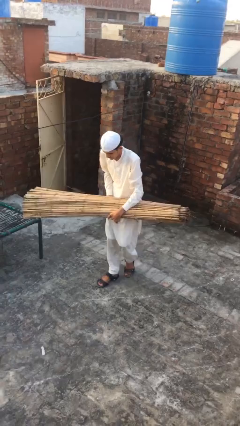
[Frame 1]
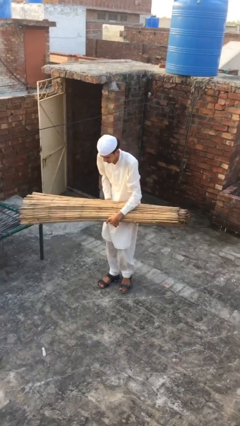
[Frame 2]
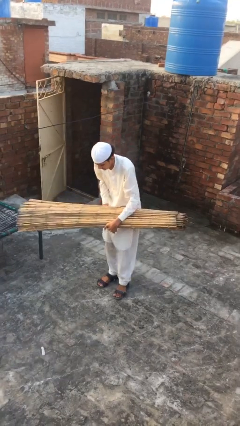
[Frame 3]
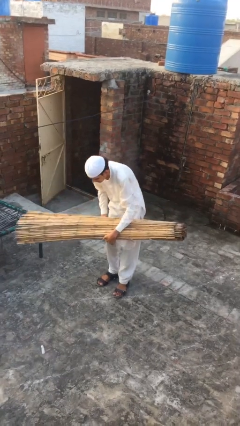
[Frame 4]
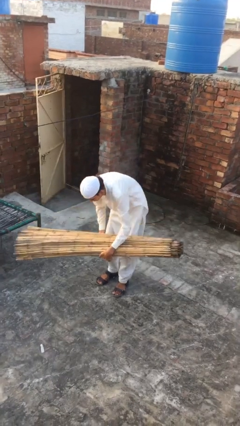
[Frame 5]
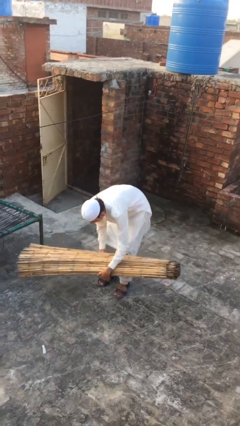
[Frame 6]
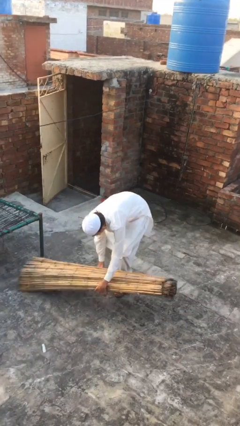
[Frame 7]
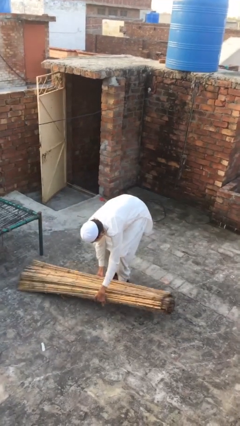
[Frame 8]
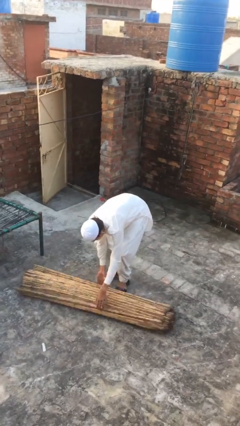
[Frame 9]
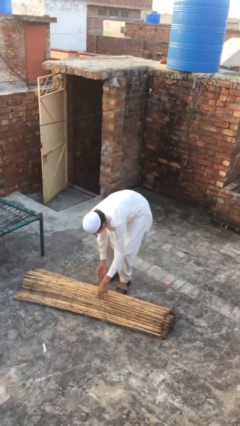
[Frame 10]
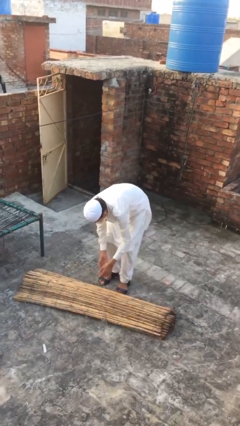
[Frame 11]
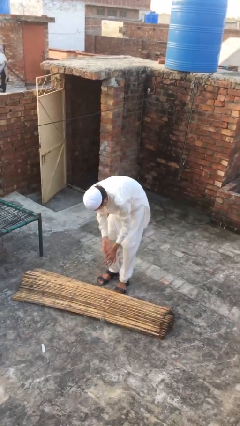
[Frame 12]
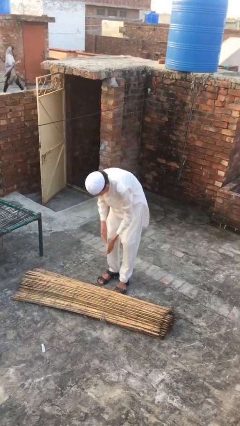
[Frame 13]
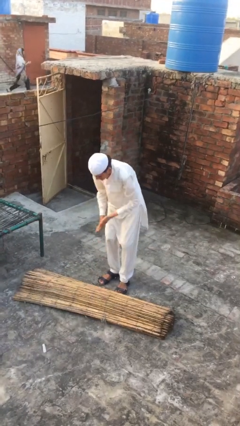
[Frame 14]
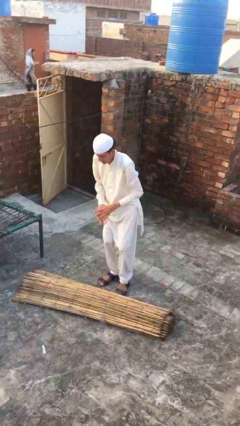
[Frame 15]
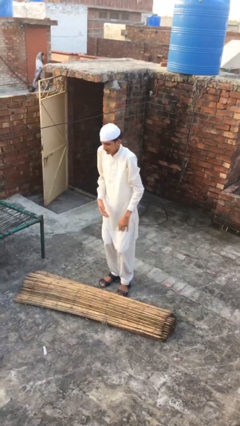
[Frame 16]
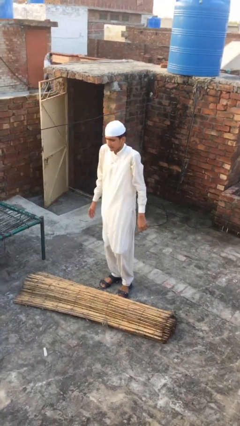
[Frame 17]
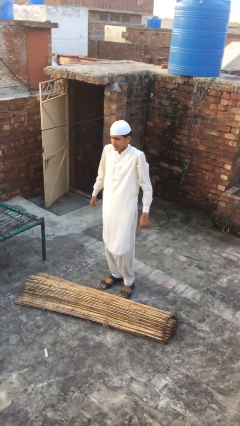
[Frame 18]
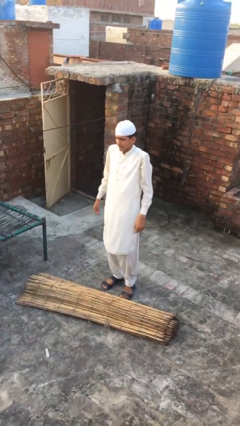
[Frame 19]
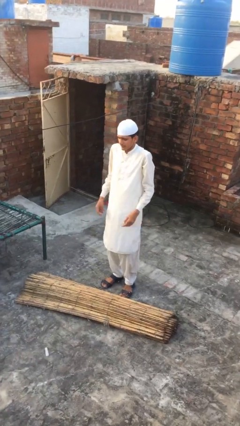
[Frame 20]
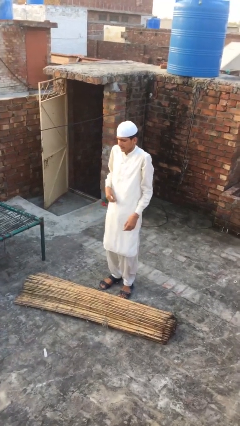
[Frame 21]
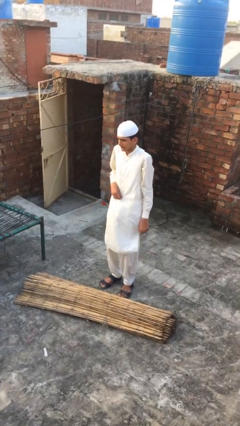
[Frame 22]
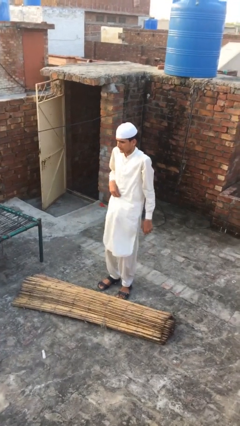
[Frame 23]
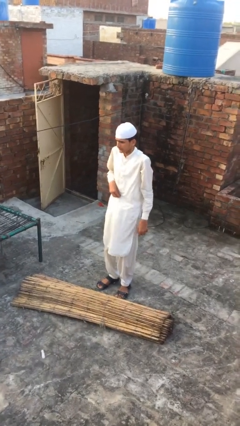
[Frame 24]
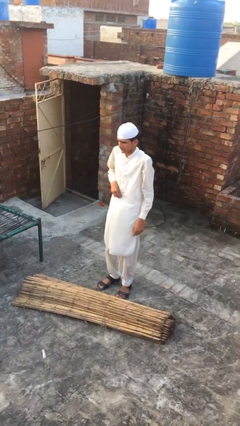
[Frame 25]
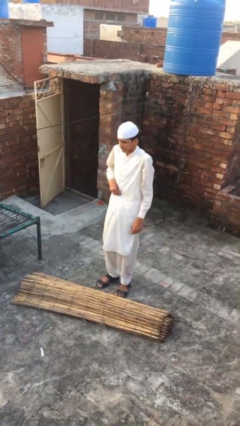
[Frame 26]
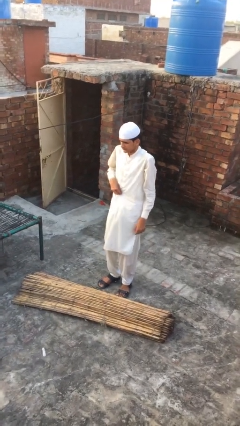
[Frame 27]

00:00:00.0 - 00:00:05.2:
person puts down object on floor

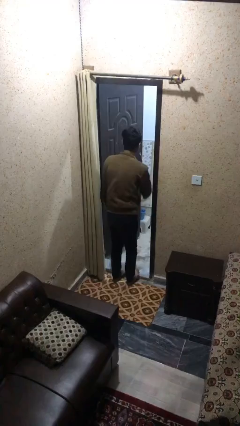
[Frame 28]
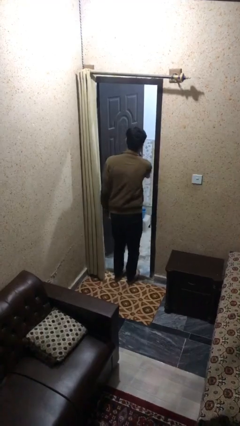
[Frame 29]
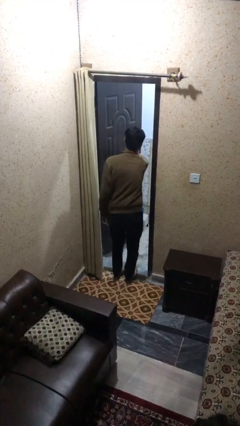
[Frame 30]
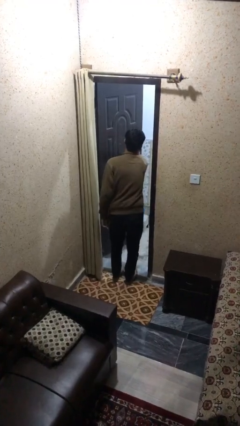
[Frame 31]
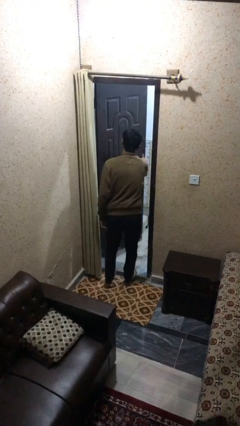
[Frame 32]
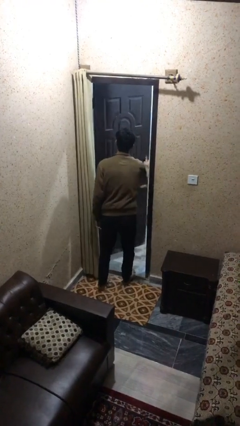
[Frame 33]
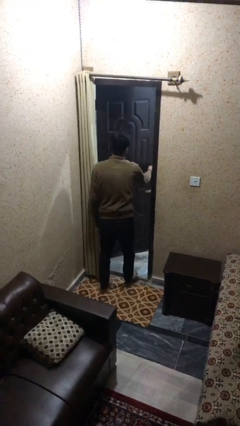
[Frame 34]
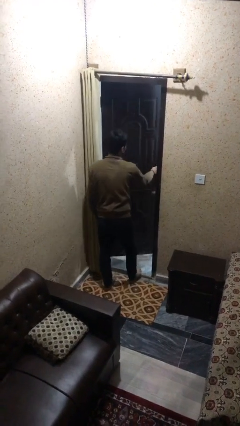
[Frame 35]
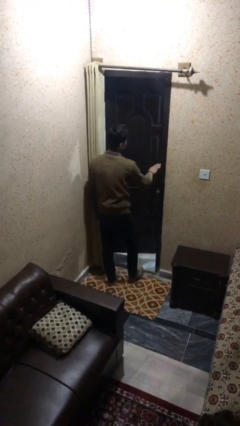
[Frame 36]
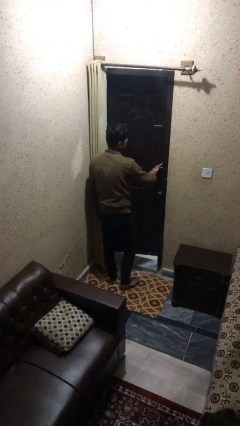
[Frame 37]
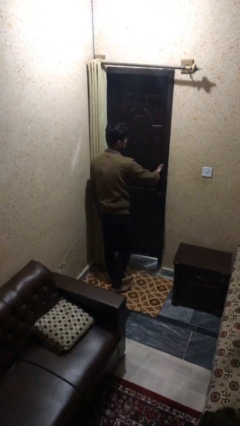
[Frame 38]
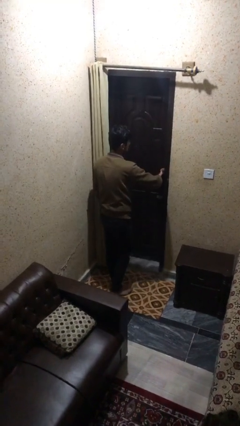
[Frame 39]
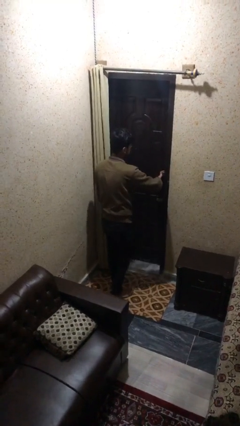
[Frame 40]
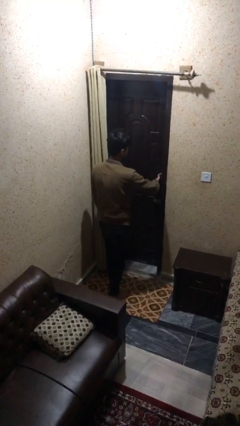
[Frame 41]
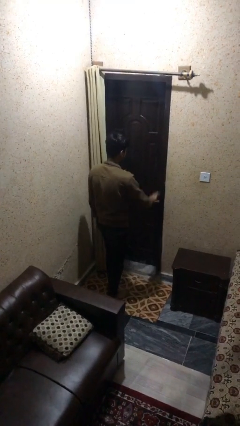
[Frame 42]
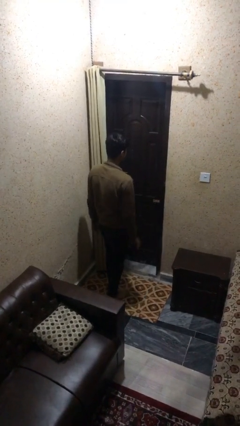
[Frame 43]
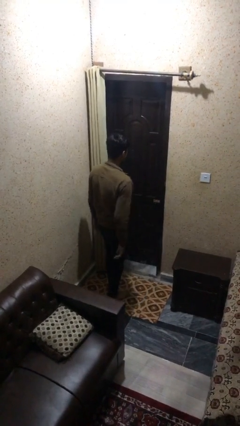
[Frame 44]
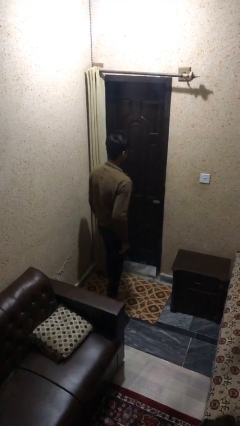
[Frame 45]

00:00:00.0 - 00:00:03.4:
person closes facility door

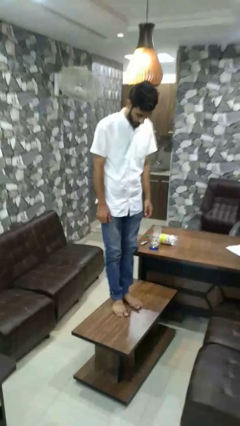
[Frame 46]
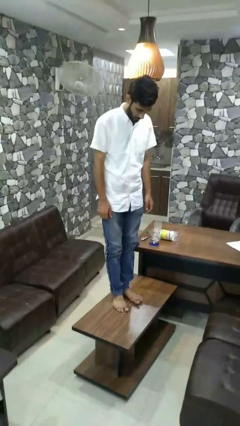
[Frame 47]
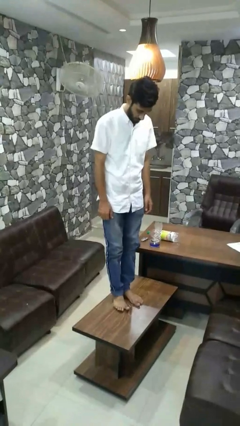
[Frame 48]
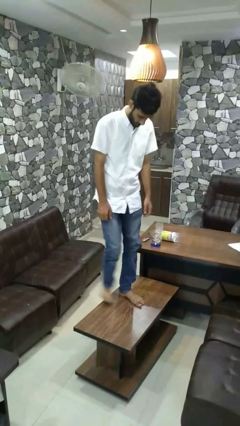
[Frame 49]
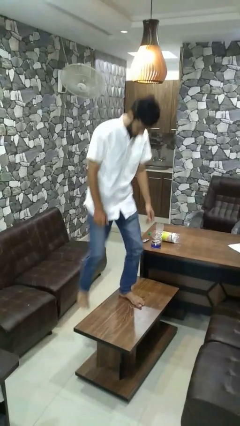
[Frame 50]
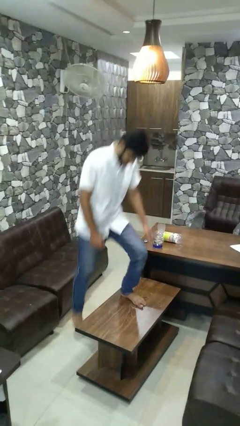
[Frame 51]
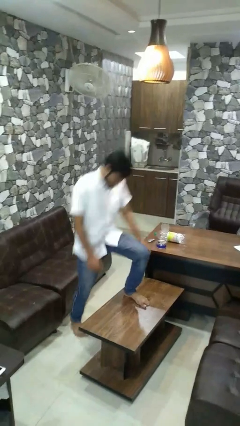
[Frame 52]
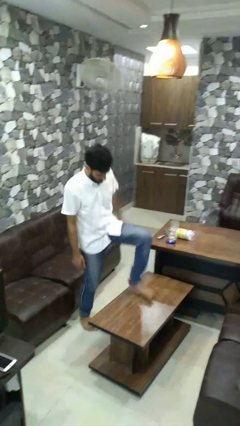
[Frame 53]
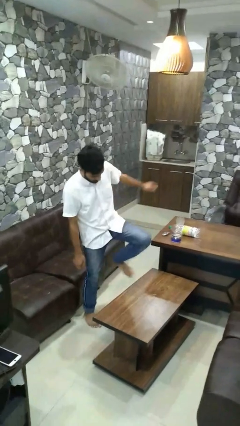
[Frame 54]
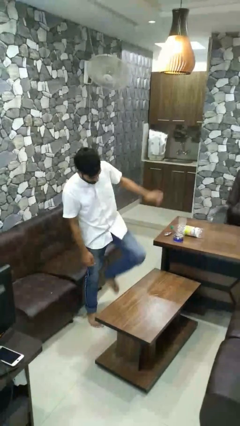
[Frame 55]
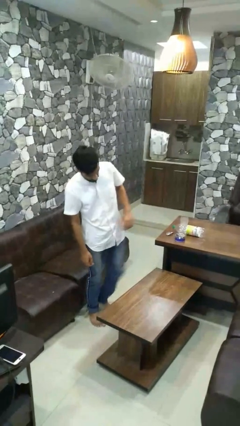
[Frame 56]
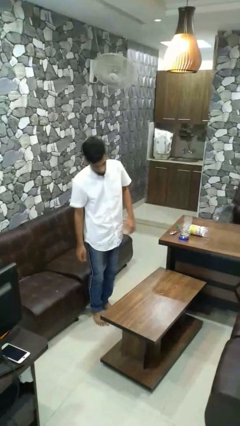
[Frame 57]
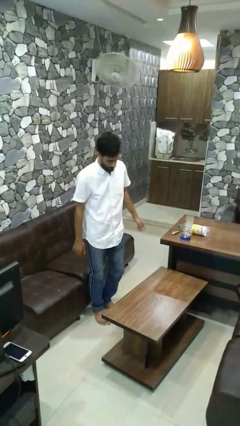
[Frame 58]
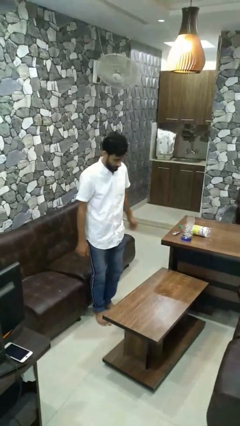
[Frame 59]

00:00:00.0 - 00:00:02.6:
person climbs off table

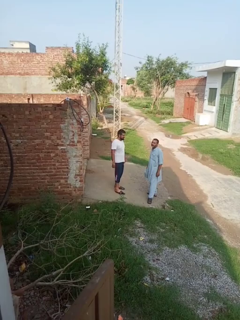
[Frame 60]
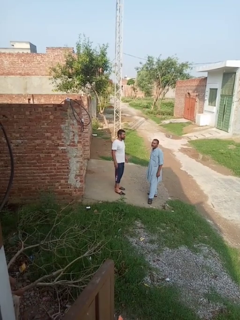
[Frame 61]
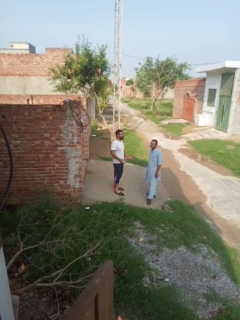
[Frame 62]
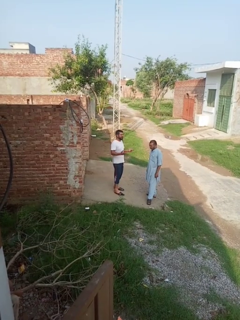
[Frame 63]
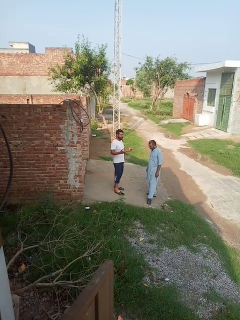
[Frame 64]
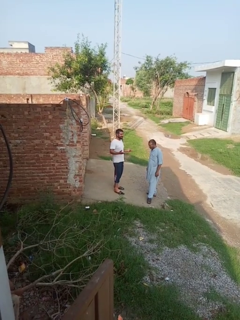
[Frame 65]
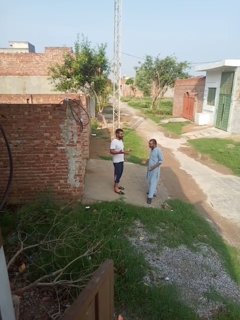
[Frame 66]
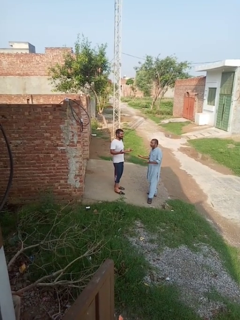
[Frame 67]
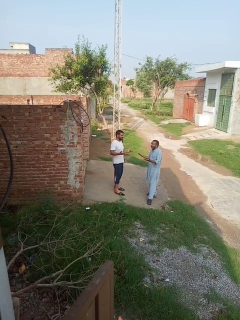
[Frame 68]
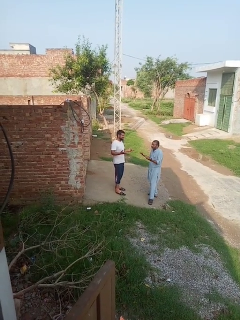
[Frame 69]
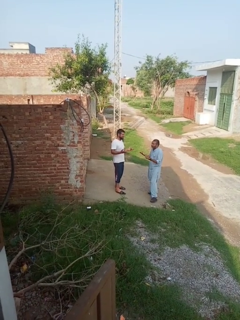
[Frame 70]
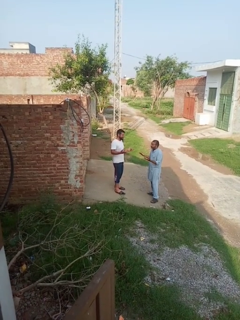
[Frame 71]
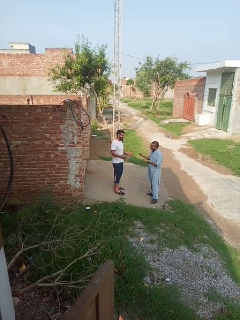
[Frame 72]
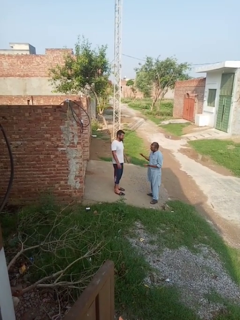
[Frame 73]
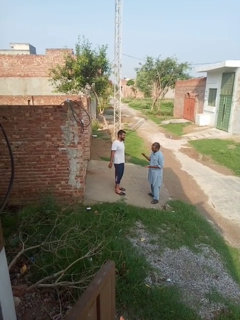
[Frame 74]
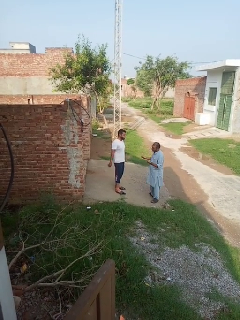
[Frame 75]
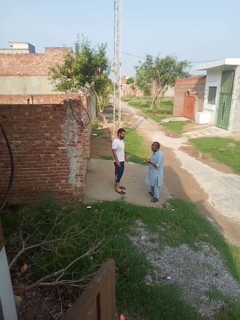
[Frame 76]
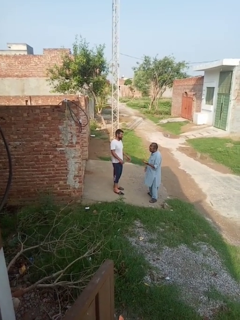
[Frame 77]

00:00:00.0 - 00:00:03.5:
person laughs with person

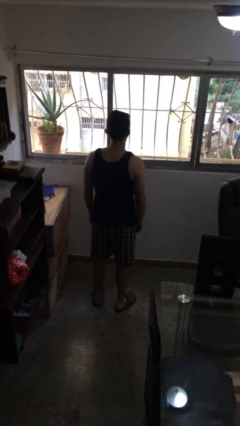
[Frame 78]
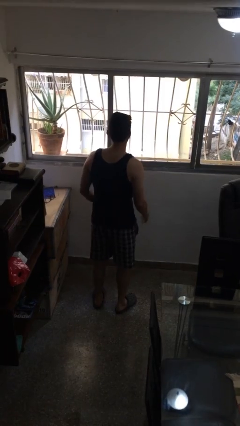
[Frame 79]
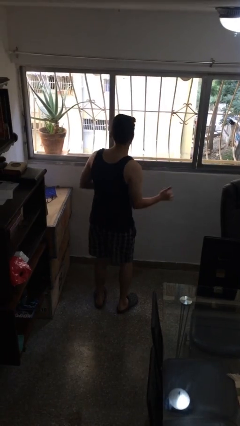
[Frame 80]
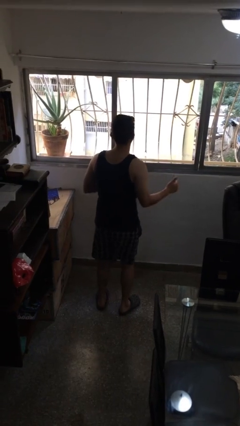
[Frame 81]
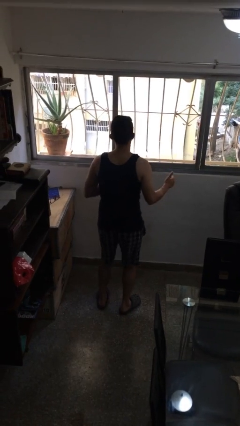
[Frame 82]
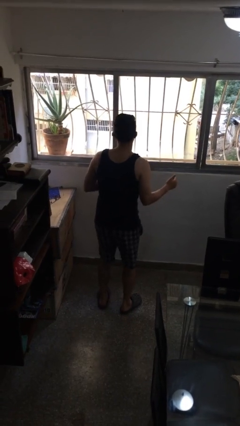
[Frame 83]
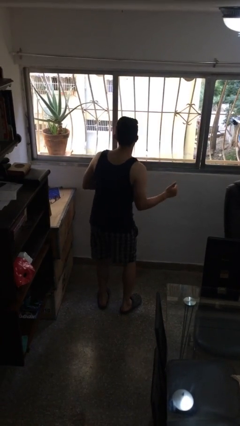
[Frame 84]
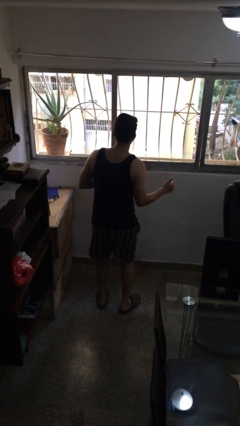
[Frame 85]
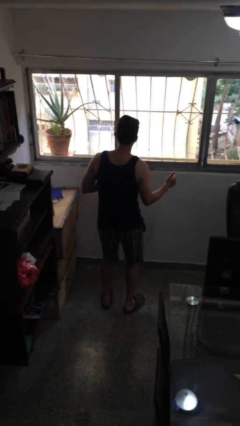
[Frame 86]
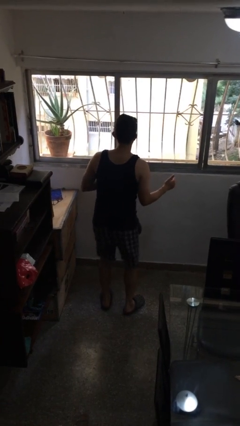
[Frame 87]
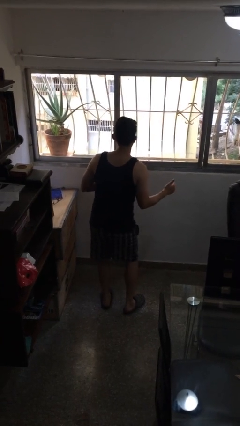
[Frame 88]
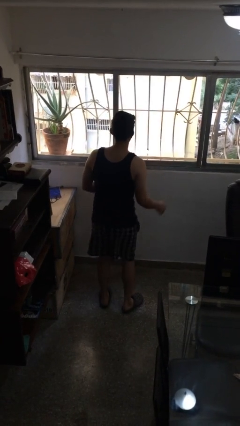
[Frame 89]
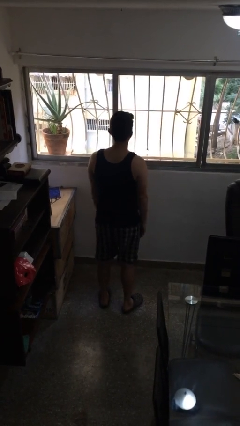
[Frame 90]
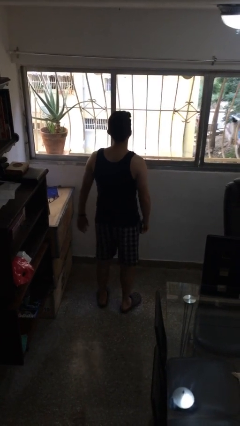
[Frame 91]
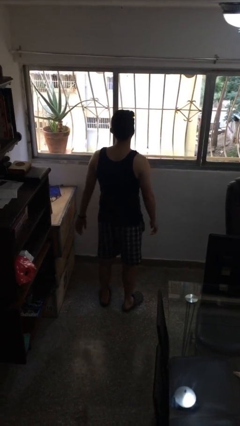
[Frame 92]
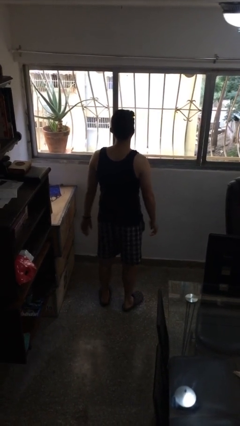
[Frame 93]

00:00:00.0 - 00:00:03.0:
person dances in place

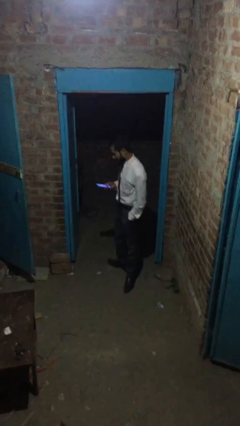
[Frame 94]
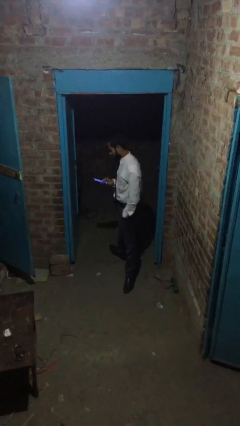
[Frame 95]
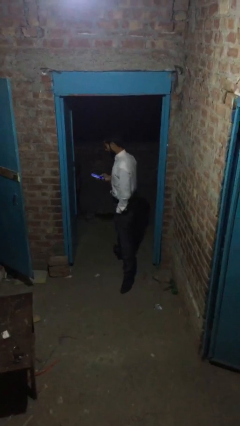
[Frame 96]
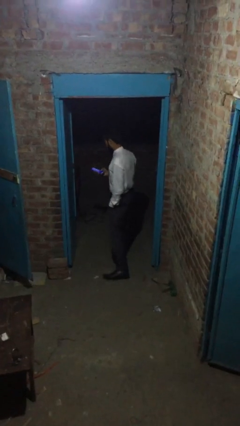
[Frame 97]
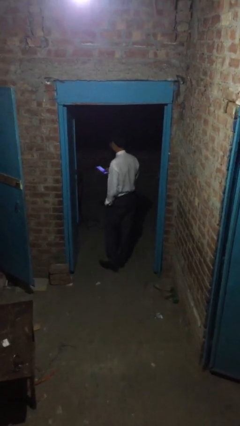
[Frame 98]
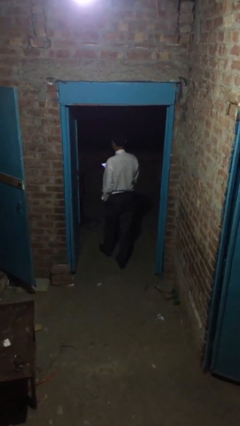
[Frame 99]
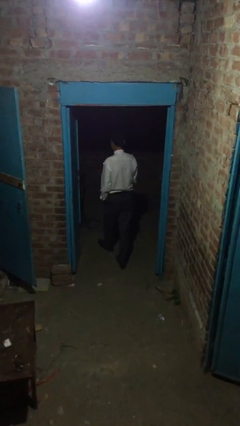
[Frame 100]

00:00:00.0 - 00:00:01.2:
person exits scene through structure
